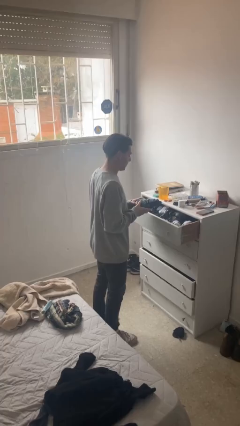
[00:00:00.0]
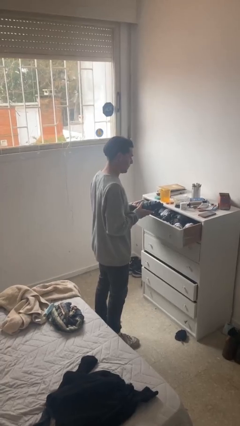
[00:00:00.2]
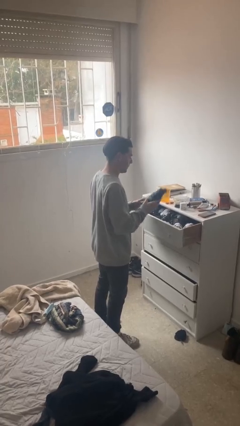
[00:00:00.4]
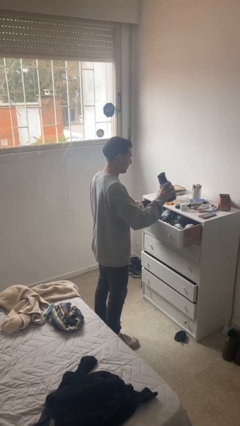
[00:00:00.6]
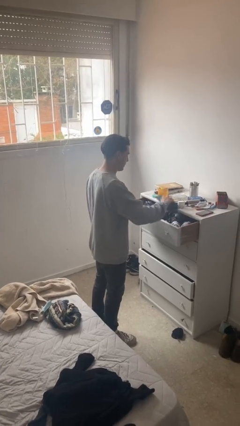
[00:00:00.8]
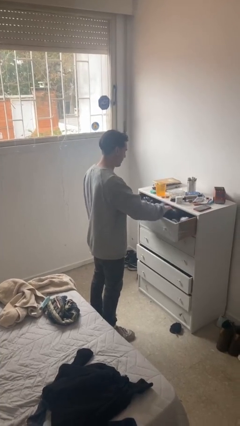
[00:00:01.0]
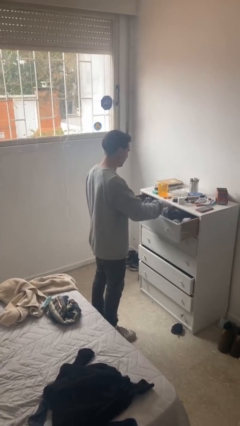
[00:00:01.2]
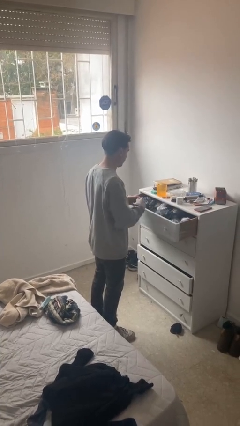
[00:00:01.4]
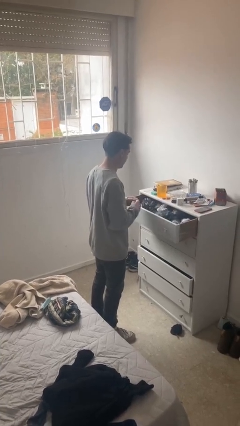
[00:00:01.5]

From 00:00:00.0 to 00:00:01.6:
person puts clothes into dresser

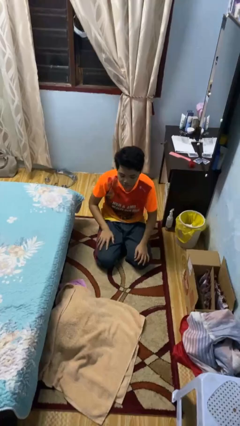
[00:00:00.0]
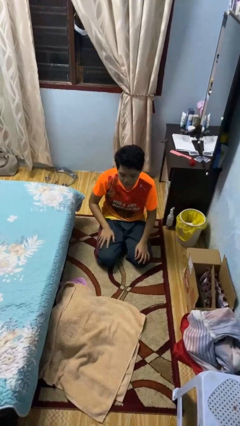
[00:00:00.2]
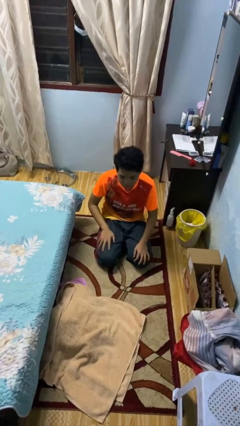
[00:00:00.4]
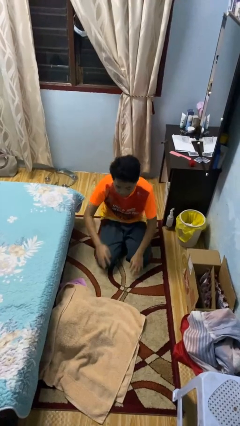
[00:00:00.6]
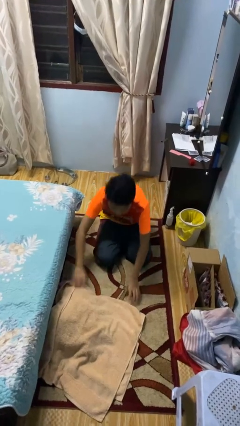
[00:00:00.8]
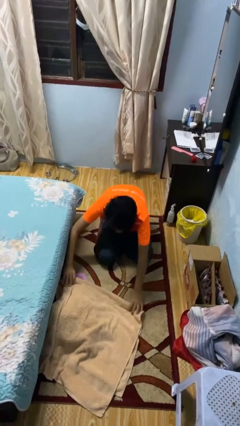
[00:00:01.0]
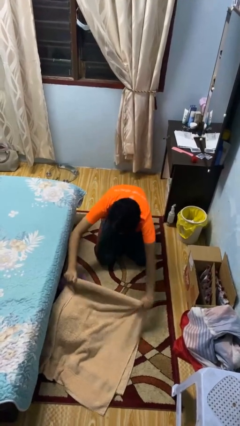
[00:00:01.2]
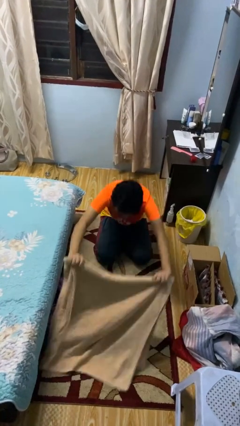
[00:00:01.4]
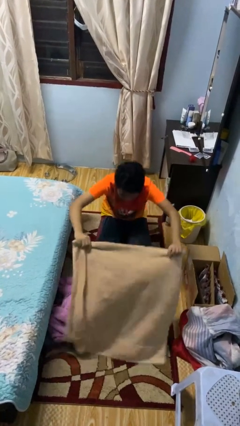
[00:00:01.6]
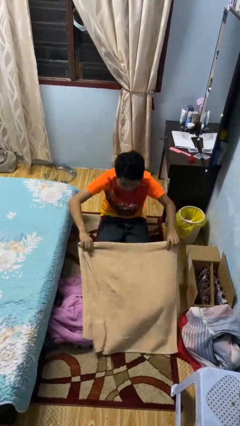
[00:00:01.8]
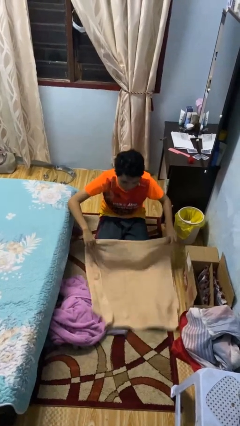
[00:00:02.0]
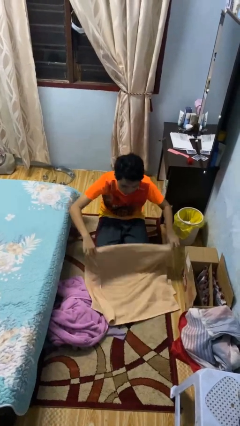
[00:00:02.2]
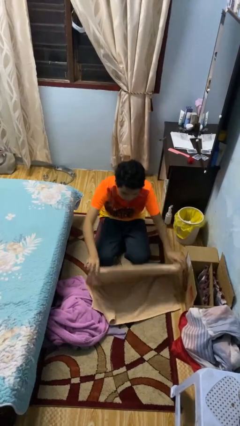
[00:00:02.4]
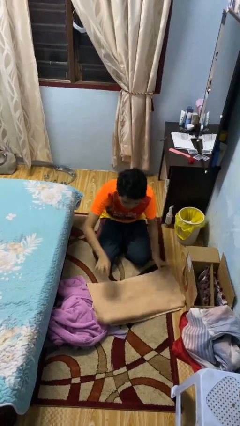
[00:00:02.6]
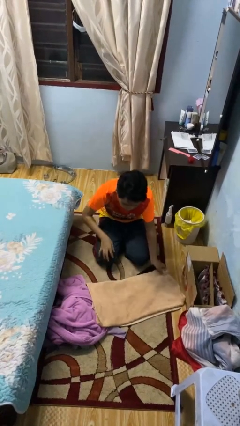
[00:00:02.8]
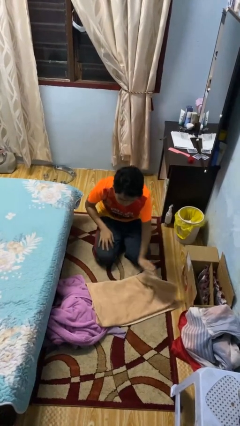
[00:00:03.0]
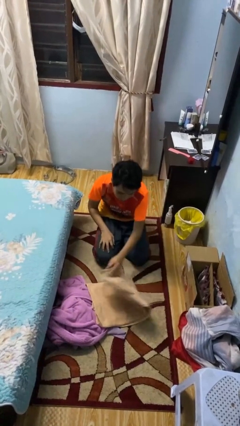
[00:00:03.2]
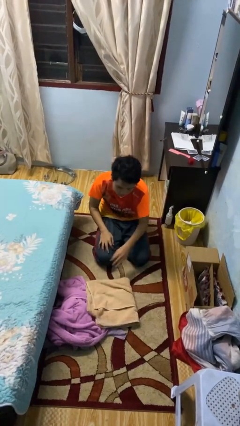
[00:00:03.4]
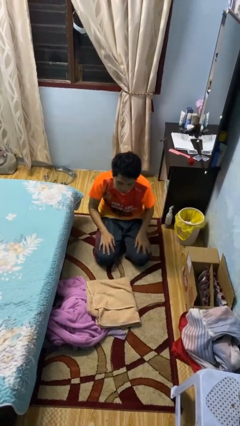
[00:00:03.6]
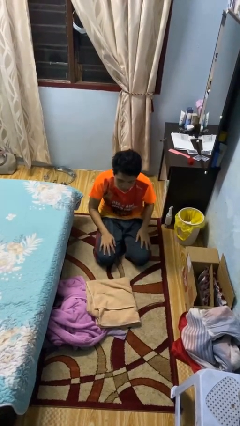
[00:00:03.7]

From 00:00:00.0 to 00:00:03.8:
person folds towel

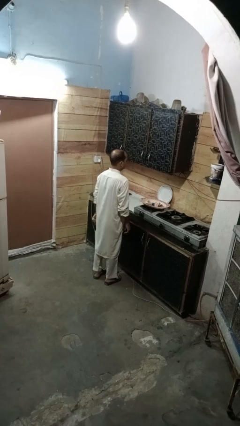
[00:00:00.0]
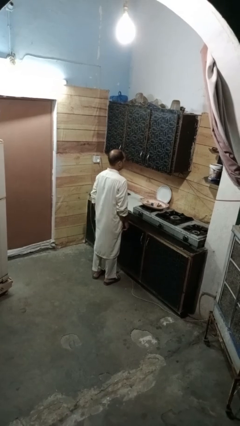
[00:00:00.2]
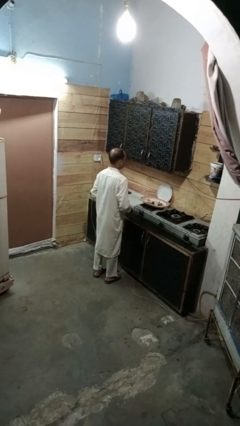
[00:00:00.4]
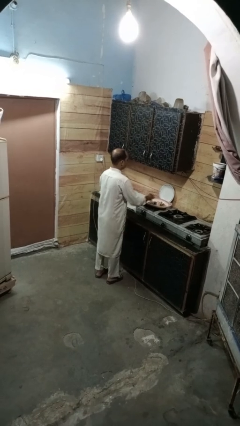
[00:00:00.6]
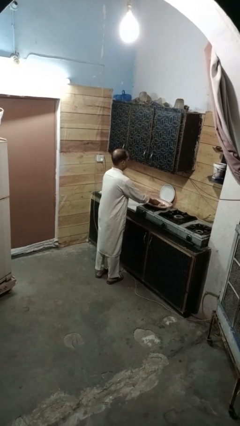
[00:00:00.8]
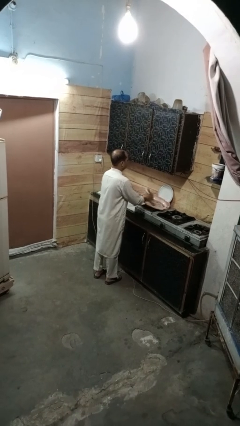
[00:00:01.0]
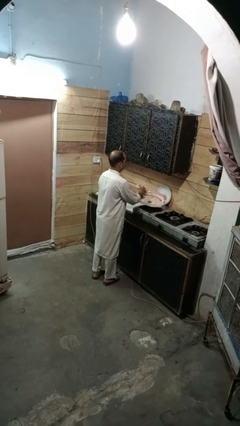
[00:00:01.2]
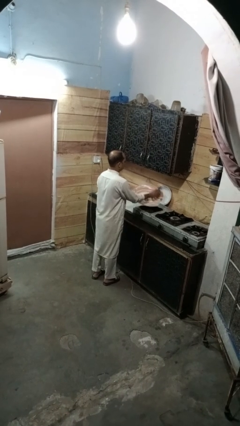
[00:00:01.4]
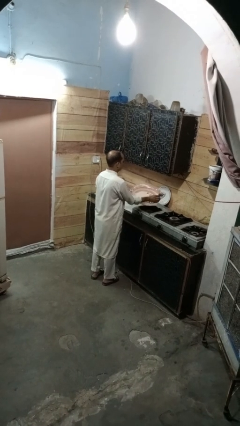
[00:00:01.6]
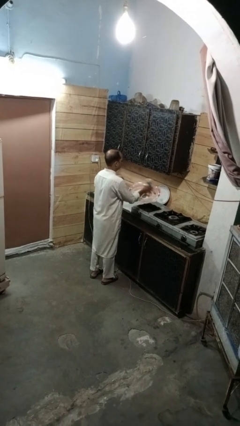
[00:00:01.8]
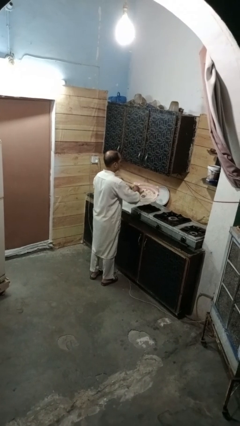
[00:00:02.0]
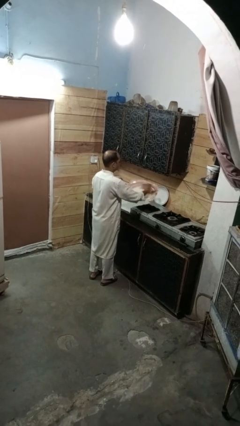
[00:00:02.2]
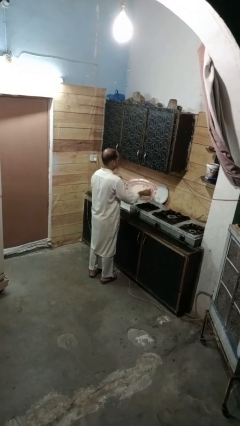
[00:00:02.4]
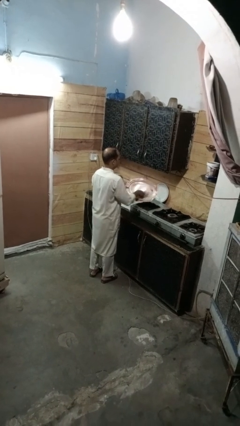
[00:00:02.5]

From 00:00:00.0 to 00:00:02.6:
person dries dish

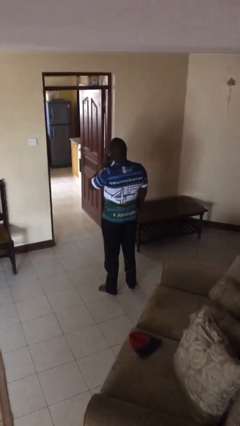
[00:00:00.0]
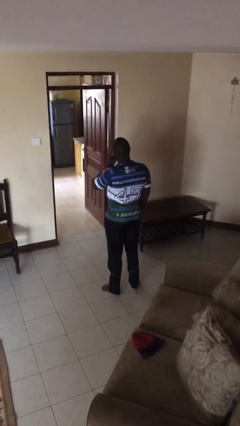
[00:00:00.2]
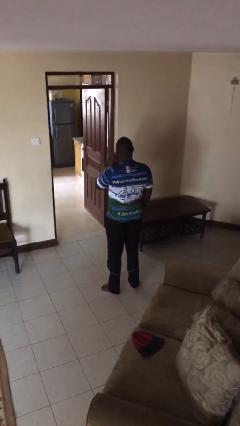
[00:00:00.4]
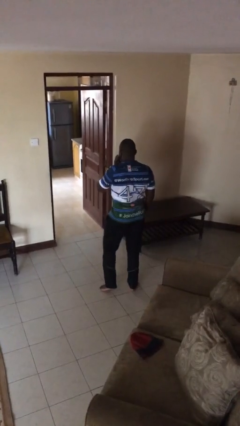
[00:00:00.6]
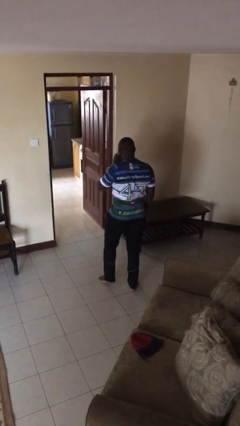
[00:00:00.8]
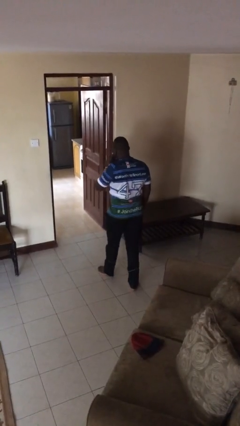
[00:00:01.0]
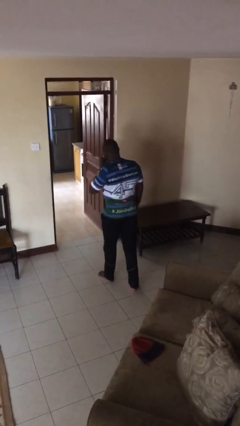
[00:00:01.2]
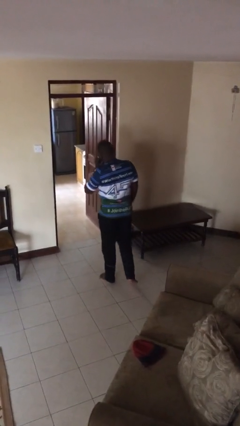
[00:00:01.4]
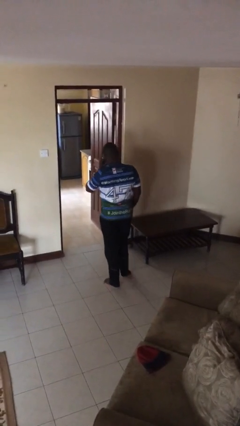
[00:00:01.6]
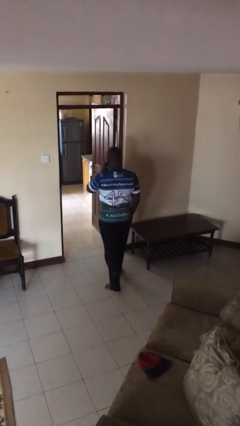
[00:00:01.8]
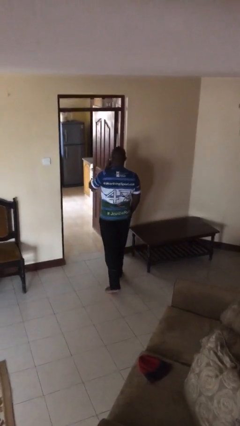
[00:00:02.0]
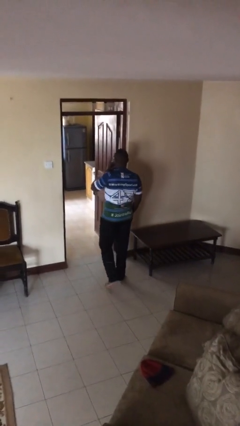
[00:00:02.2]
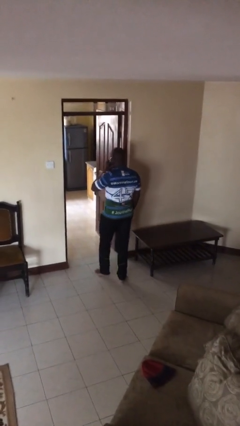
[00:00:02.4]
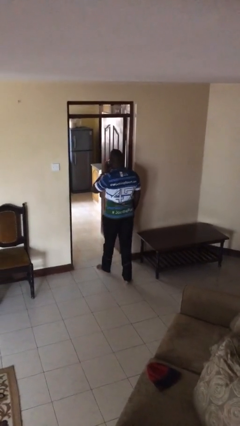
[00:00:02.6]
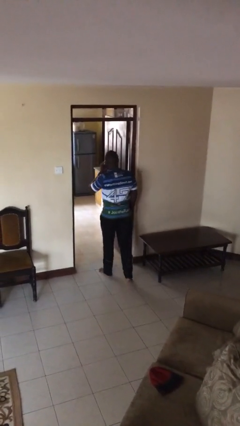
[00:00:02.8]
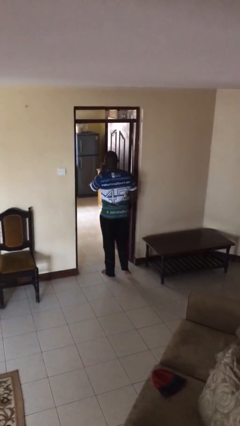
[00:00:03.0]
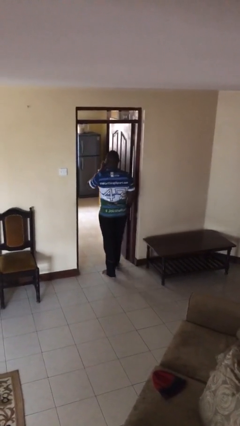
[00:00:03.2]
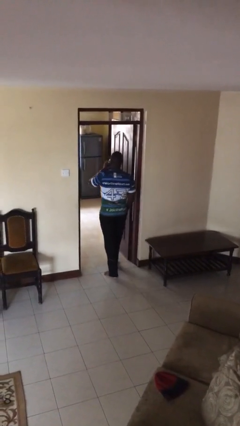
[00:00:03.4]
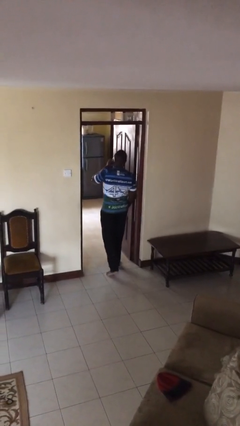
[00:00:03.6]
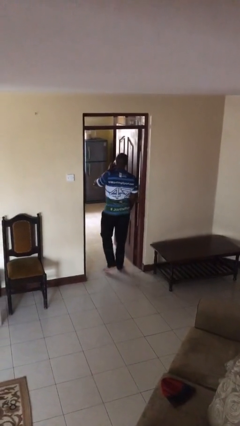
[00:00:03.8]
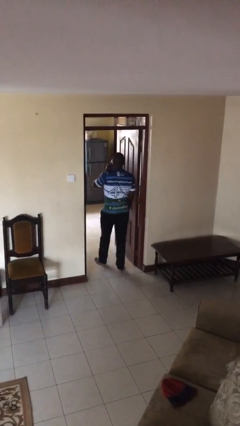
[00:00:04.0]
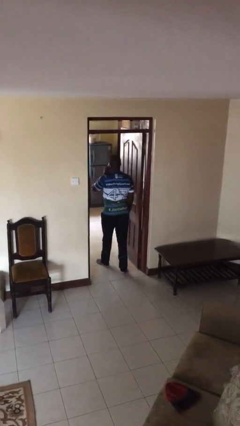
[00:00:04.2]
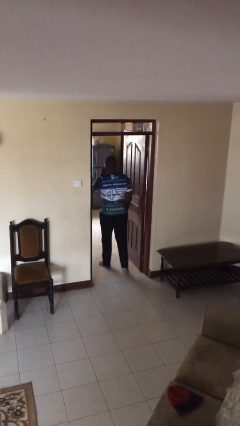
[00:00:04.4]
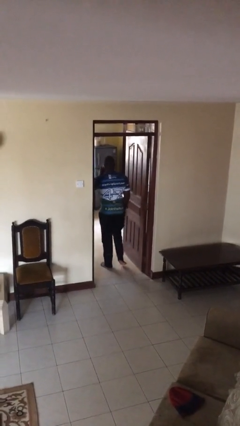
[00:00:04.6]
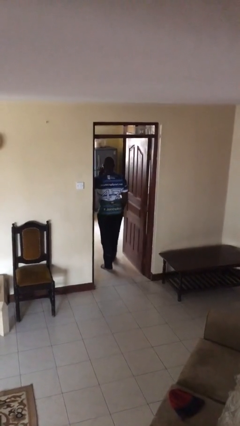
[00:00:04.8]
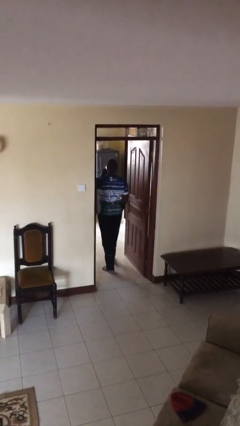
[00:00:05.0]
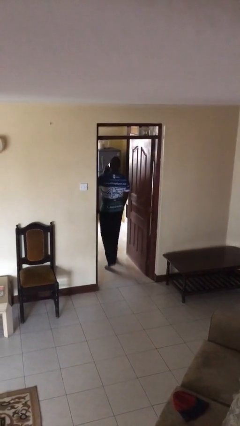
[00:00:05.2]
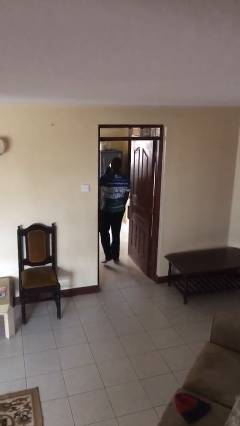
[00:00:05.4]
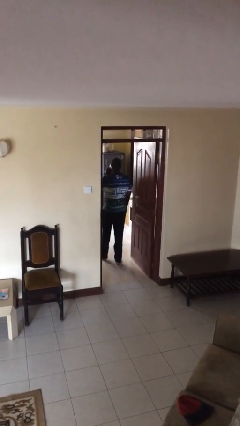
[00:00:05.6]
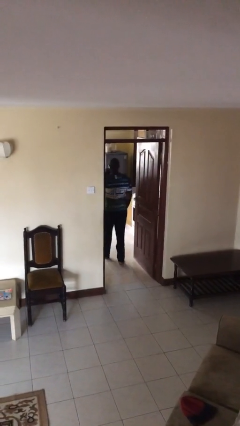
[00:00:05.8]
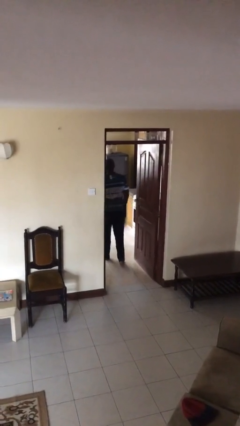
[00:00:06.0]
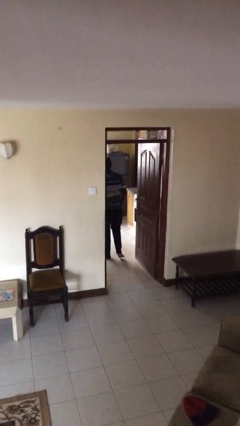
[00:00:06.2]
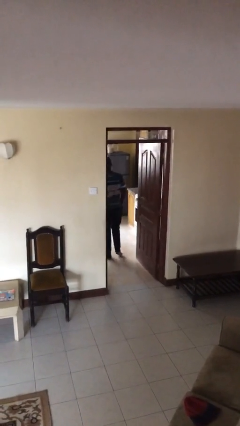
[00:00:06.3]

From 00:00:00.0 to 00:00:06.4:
person exits scene through structure

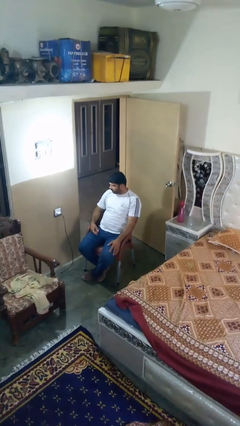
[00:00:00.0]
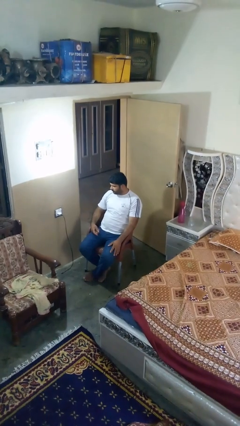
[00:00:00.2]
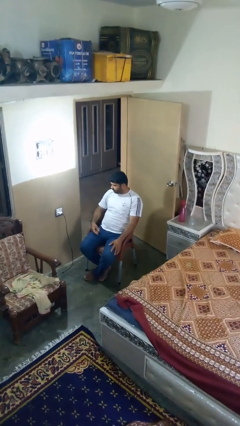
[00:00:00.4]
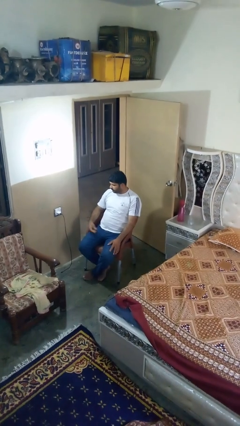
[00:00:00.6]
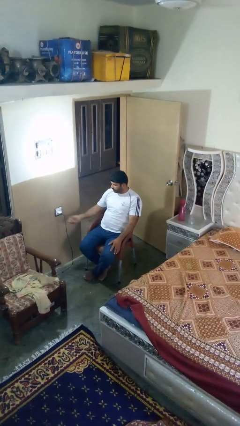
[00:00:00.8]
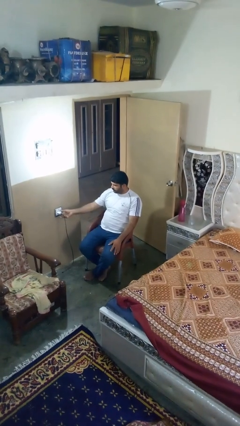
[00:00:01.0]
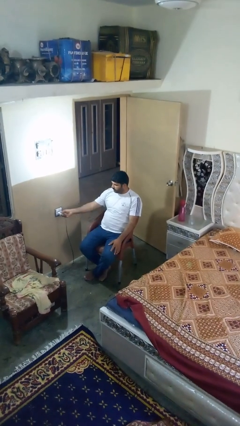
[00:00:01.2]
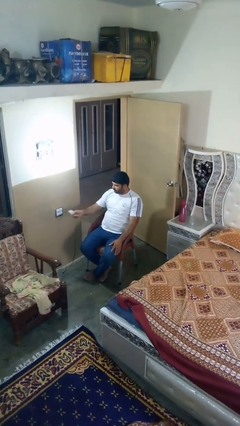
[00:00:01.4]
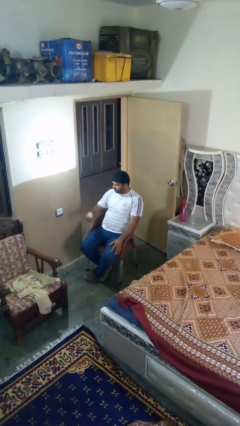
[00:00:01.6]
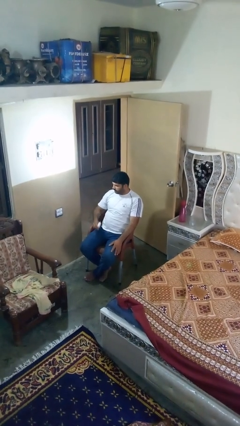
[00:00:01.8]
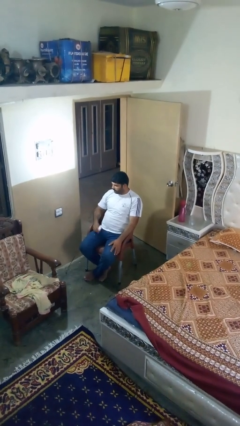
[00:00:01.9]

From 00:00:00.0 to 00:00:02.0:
person unplugs from electrical socket

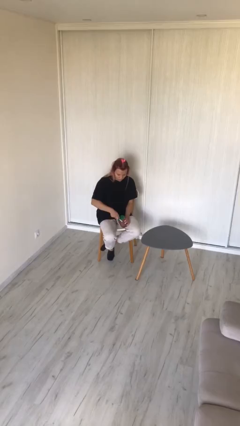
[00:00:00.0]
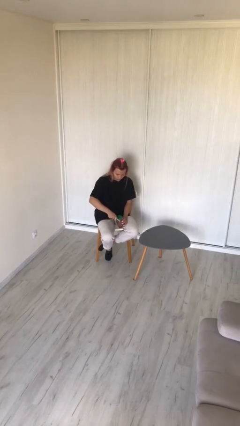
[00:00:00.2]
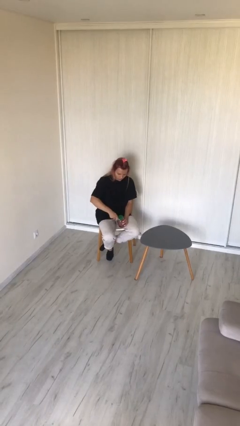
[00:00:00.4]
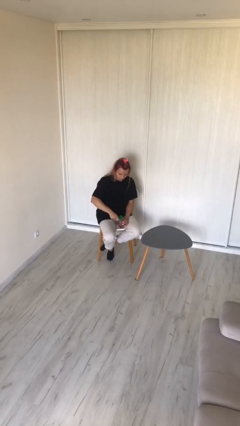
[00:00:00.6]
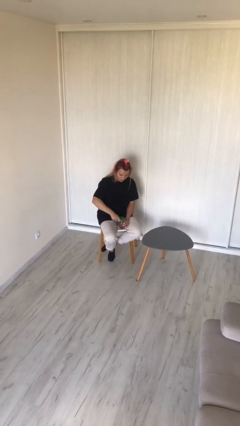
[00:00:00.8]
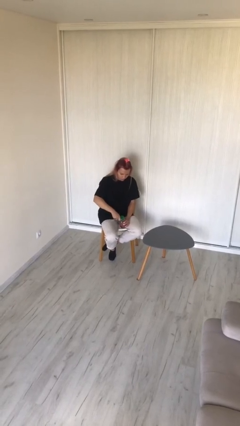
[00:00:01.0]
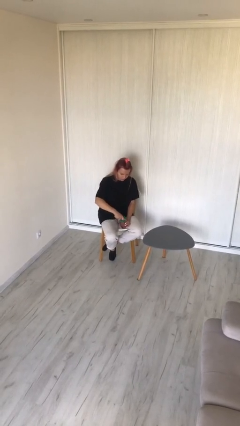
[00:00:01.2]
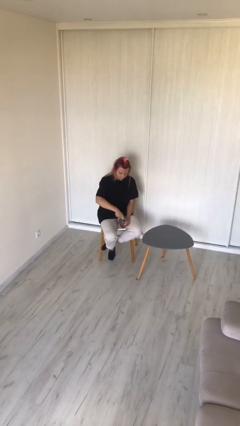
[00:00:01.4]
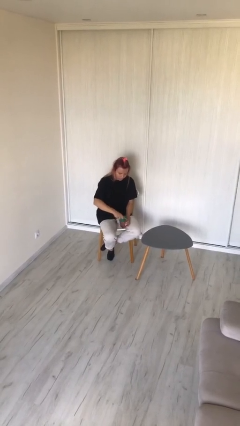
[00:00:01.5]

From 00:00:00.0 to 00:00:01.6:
person opens can with can opener
